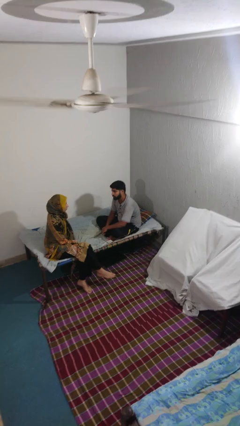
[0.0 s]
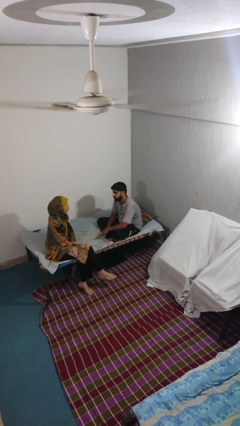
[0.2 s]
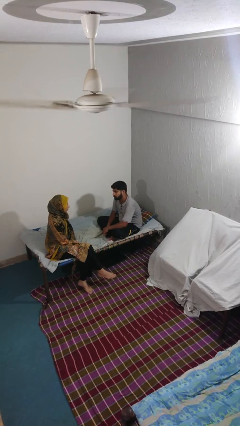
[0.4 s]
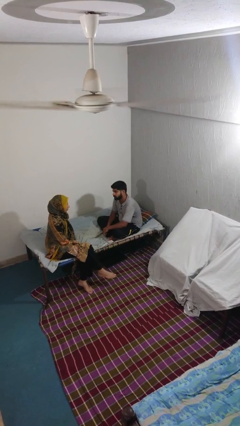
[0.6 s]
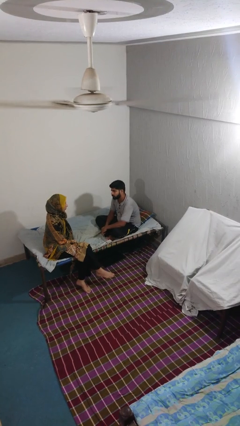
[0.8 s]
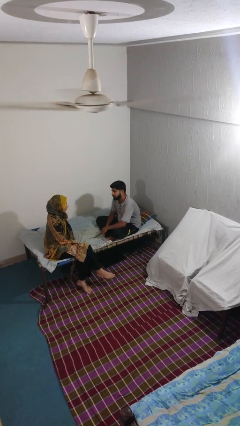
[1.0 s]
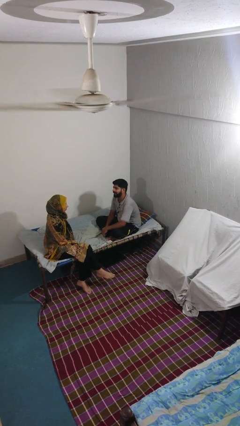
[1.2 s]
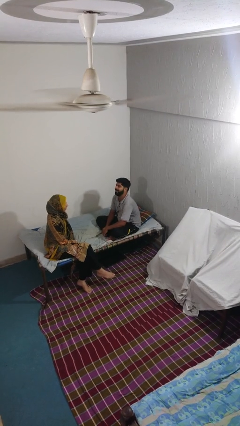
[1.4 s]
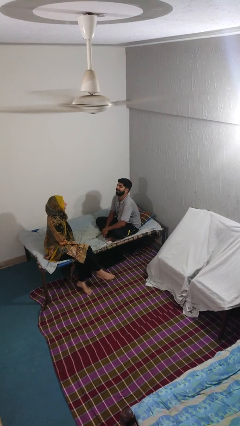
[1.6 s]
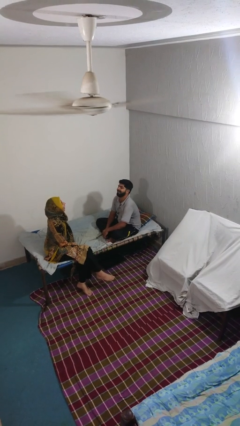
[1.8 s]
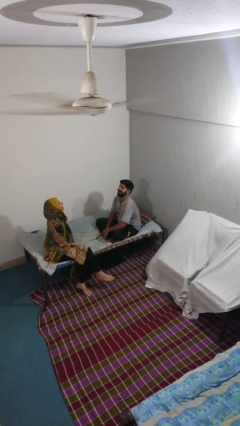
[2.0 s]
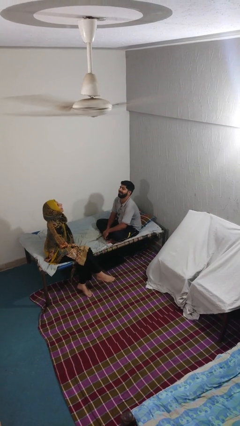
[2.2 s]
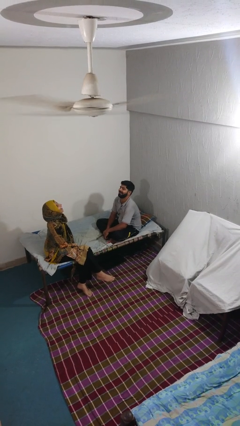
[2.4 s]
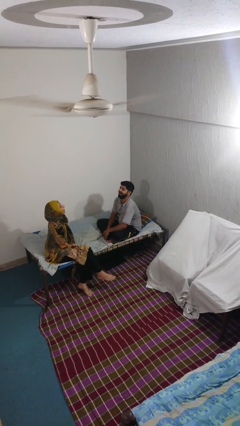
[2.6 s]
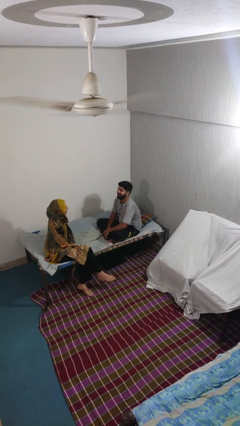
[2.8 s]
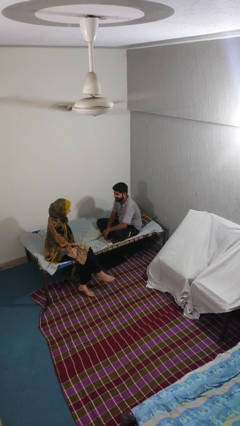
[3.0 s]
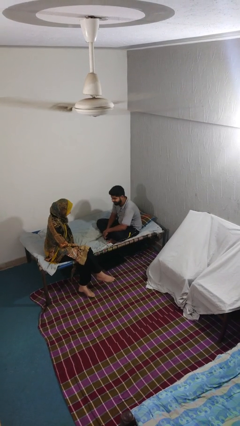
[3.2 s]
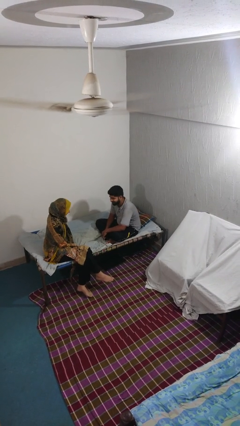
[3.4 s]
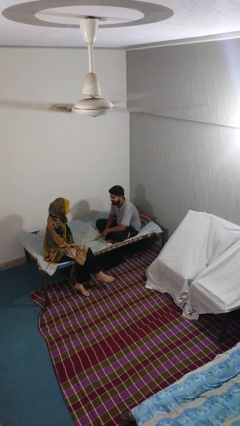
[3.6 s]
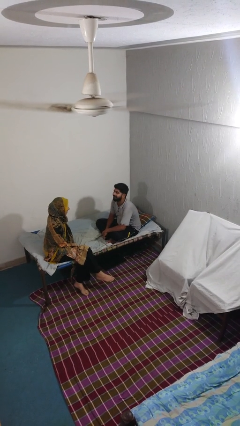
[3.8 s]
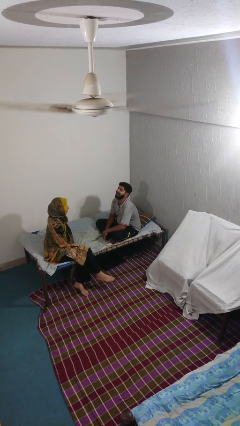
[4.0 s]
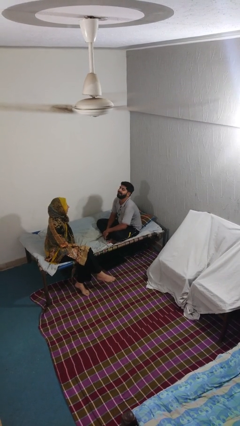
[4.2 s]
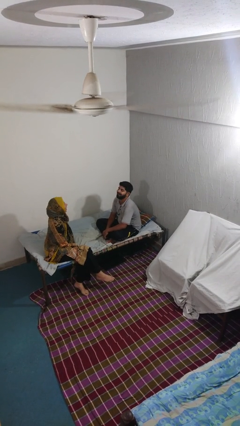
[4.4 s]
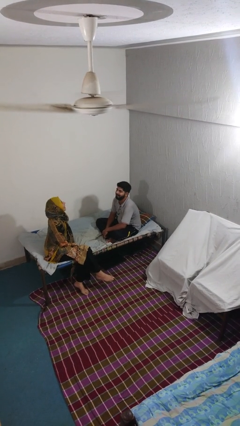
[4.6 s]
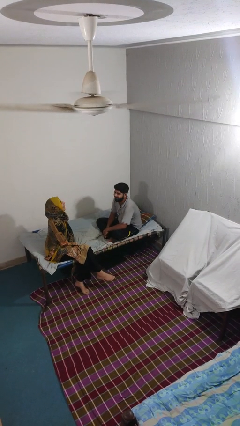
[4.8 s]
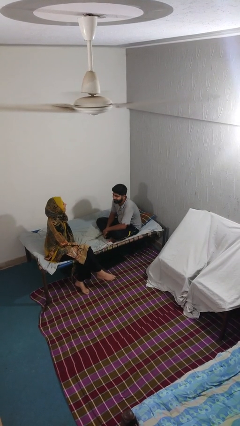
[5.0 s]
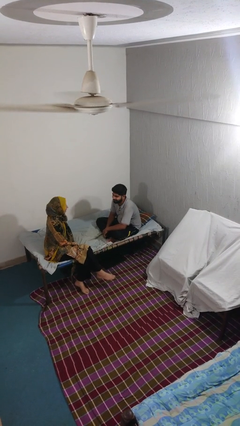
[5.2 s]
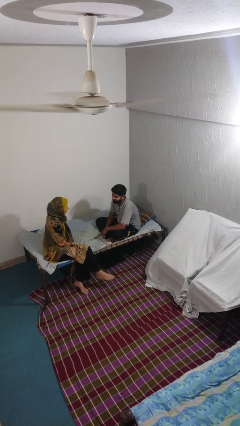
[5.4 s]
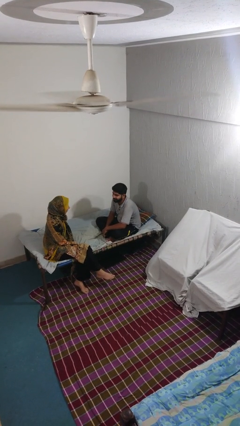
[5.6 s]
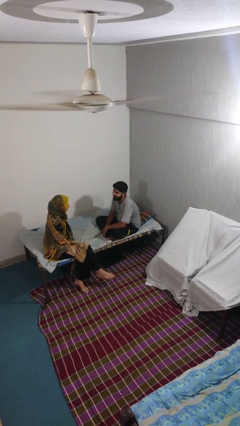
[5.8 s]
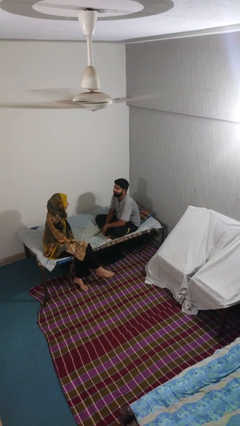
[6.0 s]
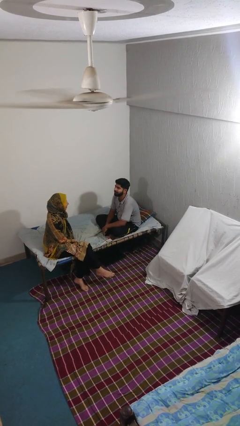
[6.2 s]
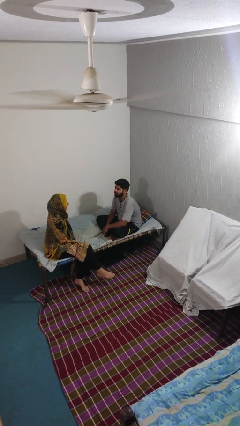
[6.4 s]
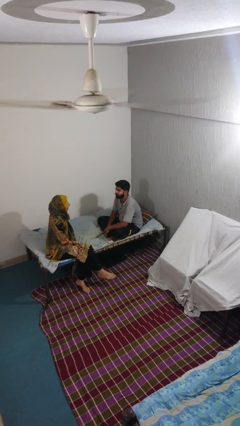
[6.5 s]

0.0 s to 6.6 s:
person laughs with person

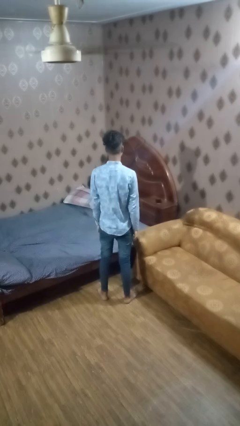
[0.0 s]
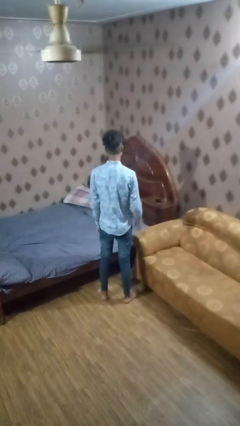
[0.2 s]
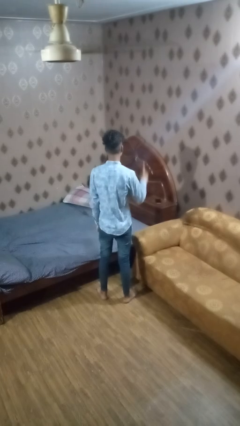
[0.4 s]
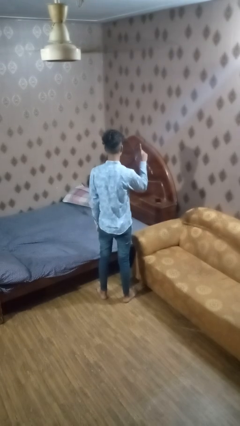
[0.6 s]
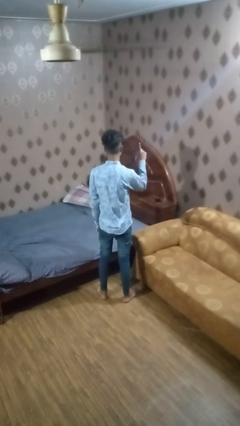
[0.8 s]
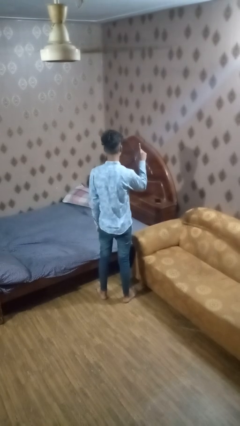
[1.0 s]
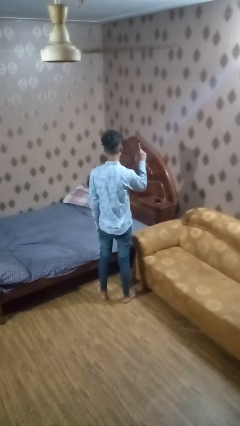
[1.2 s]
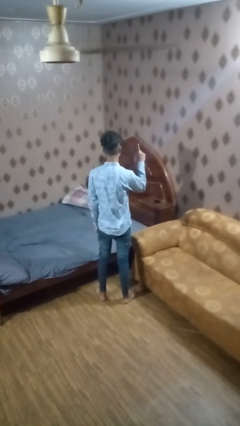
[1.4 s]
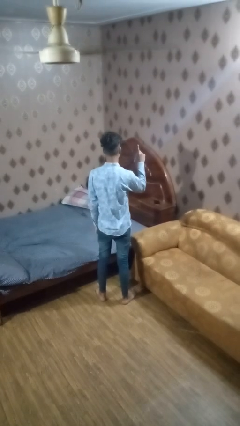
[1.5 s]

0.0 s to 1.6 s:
person gestures number one

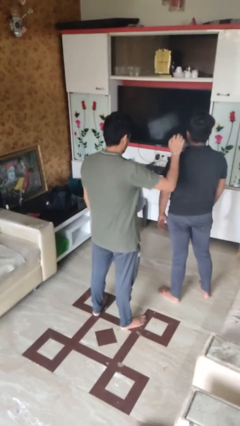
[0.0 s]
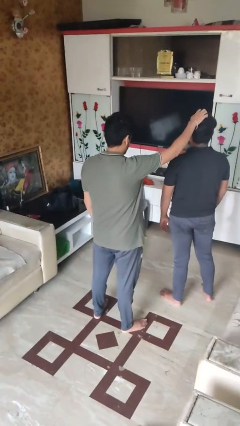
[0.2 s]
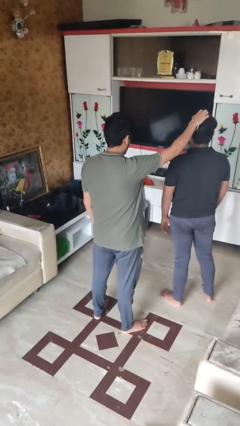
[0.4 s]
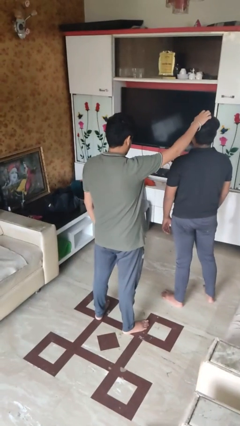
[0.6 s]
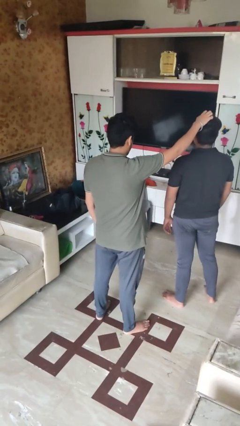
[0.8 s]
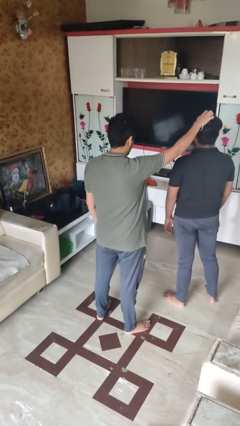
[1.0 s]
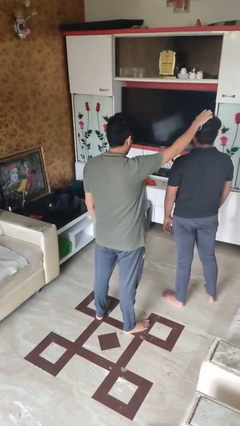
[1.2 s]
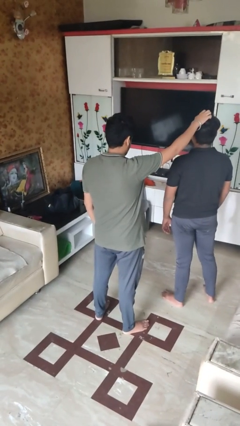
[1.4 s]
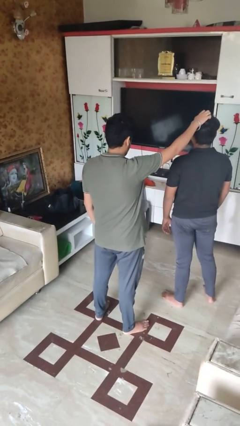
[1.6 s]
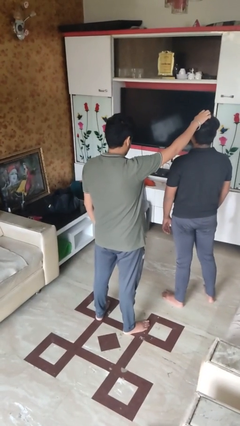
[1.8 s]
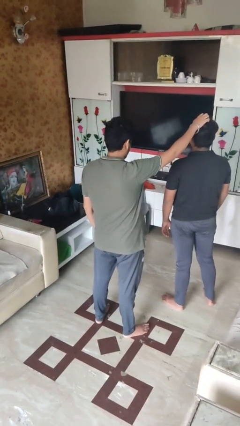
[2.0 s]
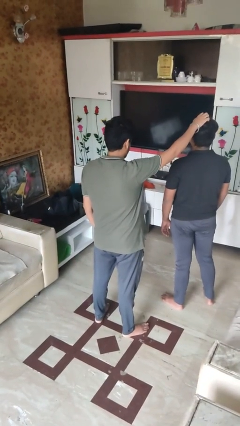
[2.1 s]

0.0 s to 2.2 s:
person grabs person by hair

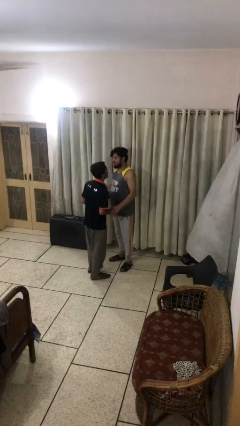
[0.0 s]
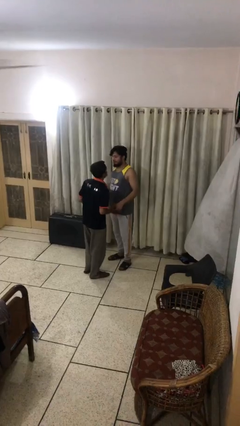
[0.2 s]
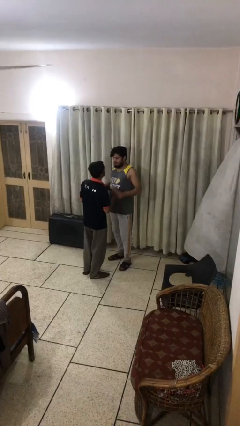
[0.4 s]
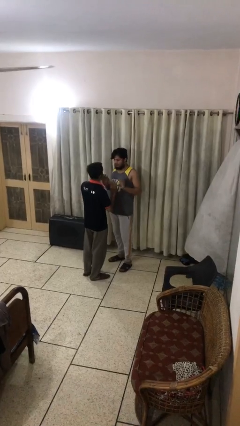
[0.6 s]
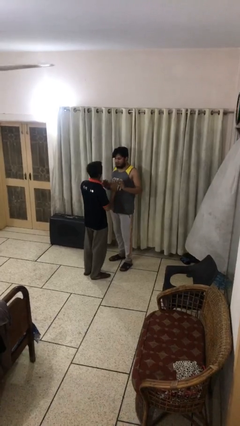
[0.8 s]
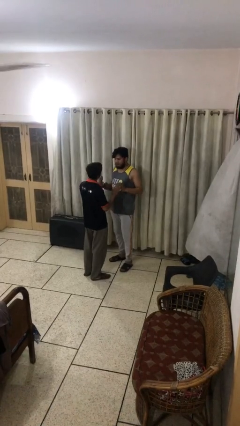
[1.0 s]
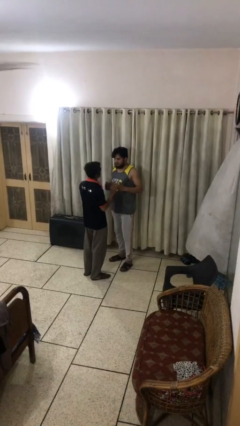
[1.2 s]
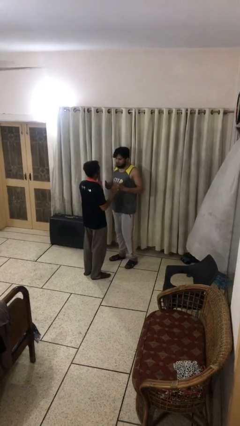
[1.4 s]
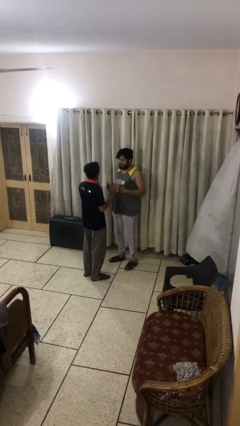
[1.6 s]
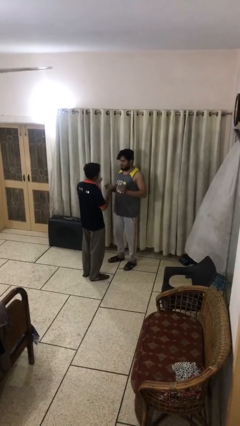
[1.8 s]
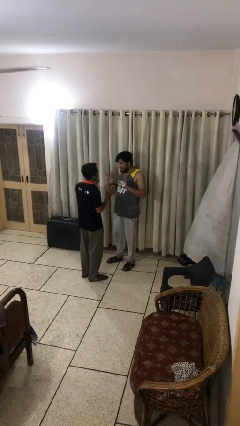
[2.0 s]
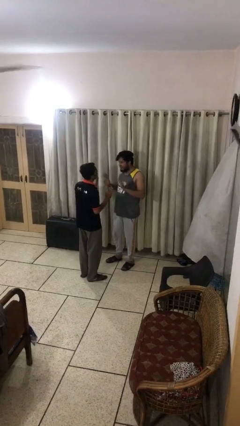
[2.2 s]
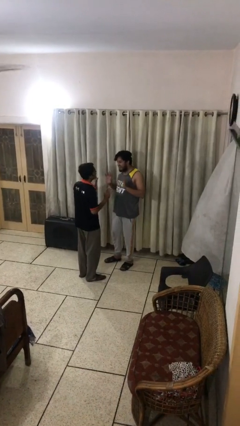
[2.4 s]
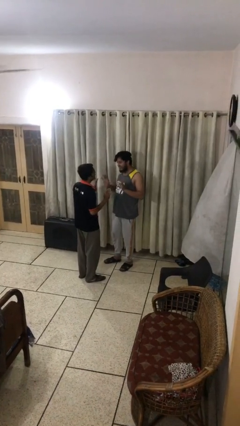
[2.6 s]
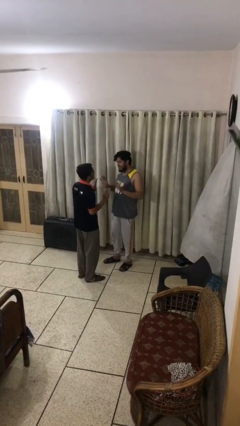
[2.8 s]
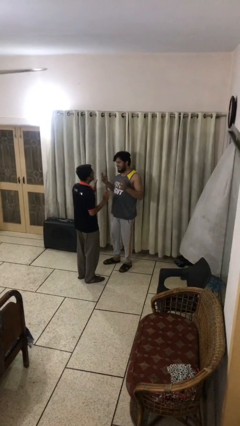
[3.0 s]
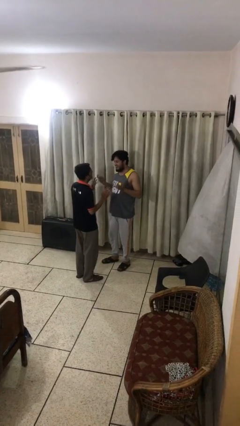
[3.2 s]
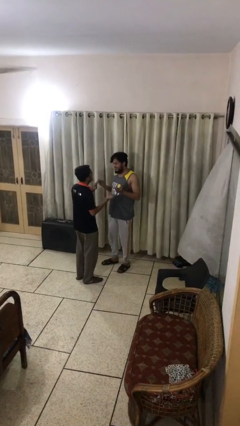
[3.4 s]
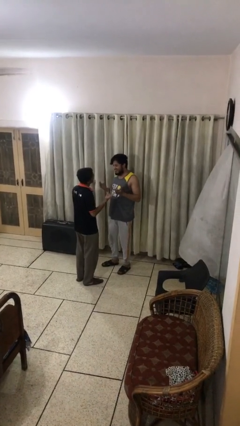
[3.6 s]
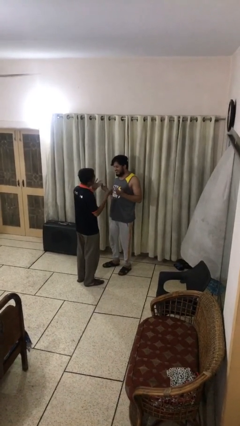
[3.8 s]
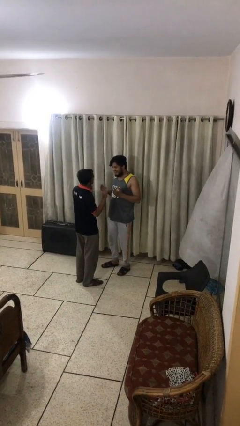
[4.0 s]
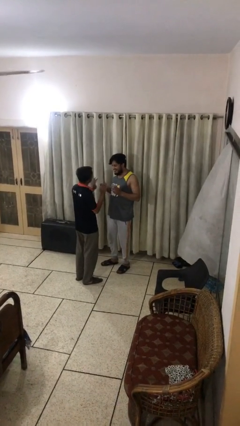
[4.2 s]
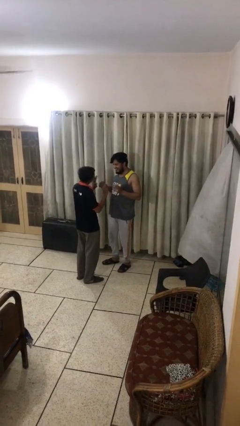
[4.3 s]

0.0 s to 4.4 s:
person talks to person

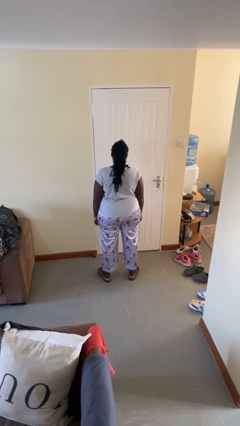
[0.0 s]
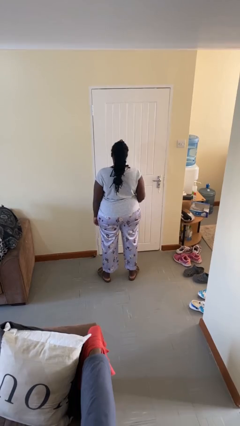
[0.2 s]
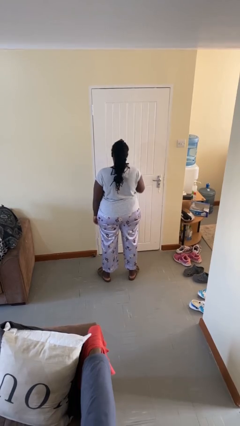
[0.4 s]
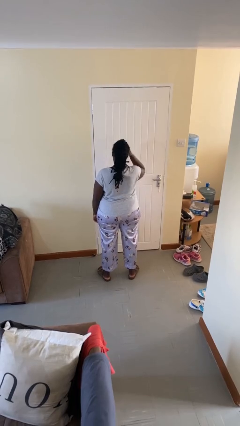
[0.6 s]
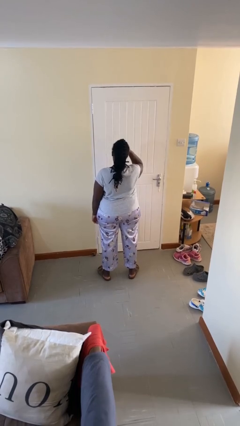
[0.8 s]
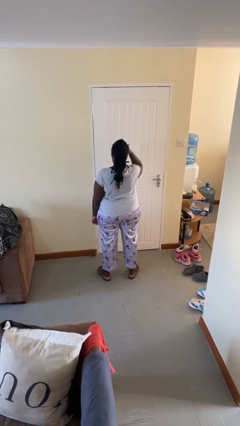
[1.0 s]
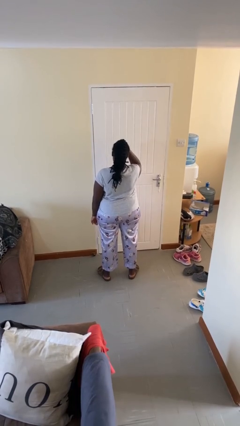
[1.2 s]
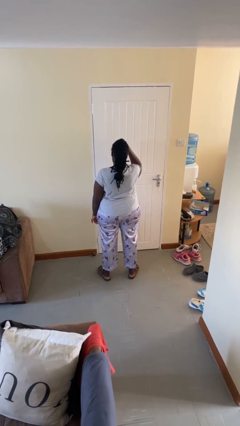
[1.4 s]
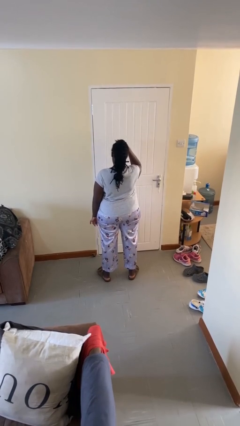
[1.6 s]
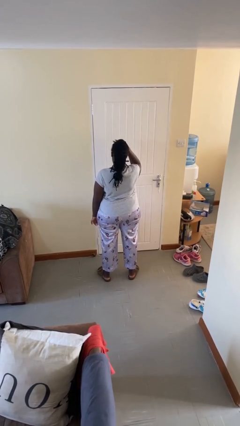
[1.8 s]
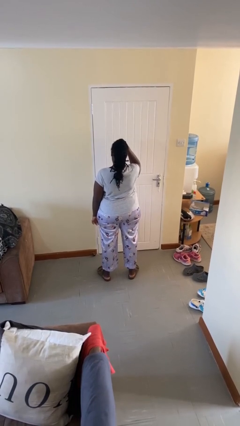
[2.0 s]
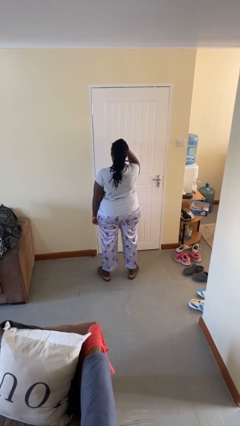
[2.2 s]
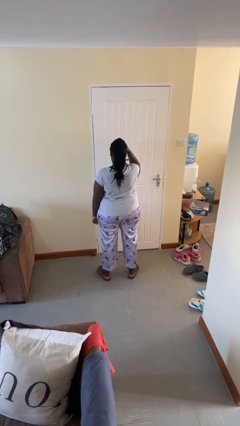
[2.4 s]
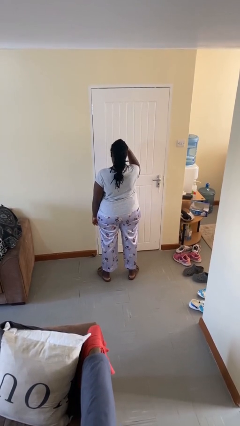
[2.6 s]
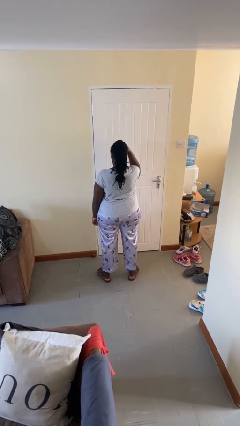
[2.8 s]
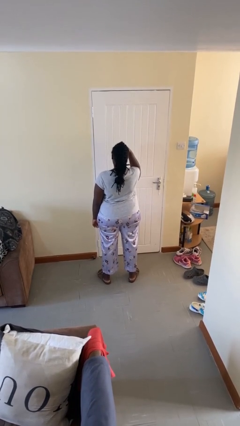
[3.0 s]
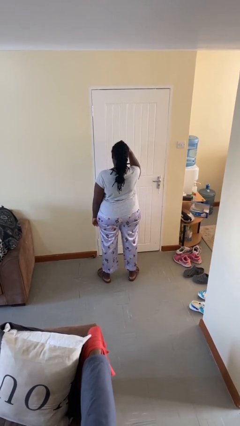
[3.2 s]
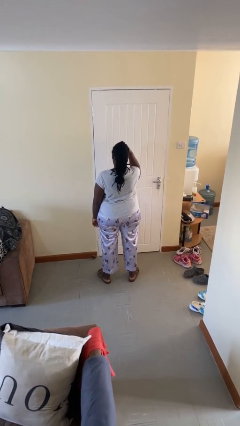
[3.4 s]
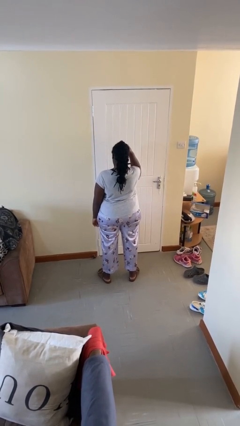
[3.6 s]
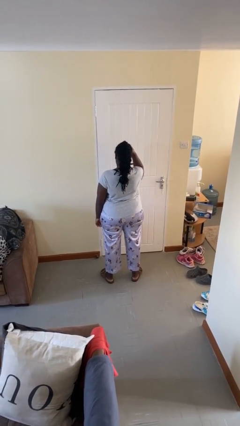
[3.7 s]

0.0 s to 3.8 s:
person scratches face
